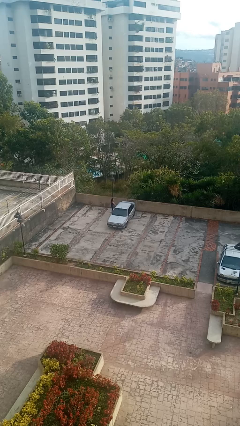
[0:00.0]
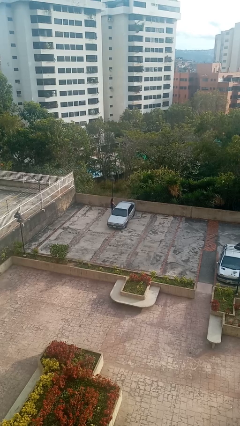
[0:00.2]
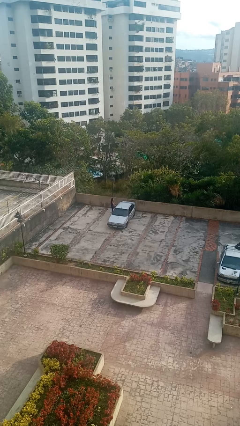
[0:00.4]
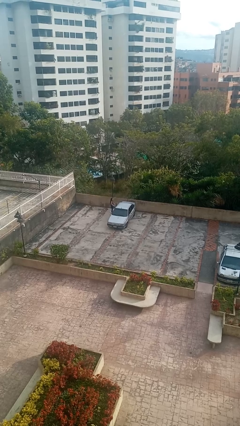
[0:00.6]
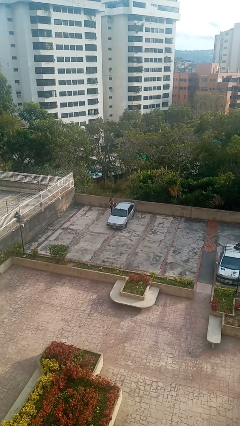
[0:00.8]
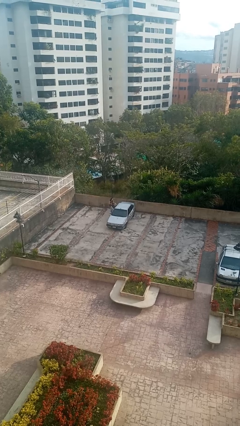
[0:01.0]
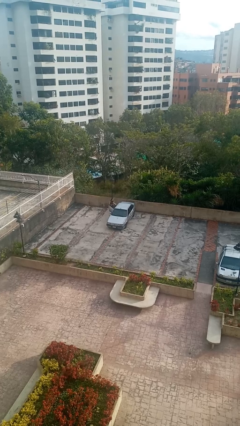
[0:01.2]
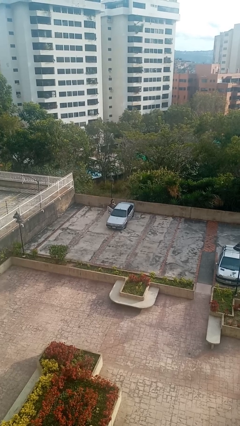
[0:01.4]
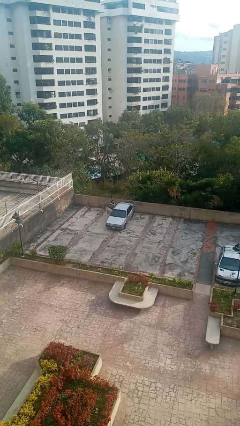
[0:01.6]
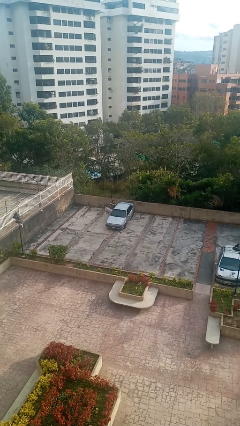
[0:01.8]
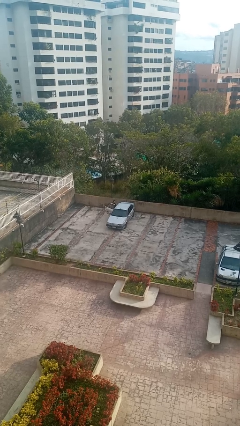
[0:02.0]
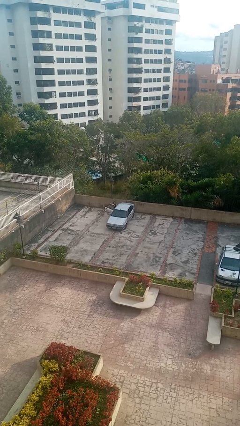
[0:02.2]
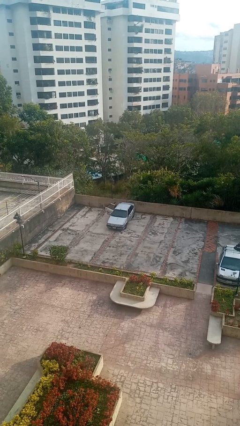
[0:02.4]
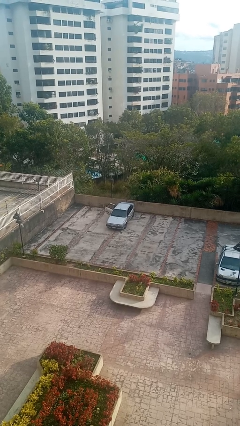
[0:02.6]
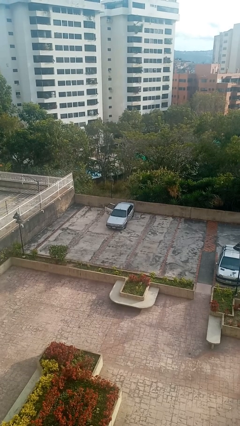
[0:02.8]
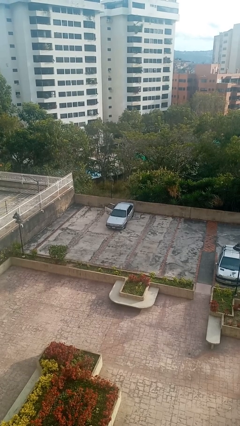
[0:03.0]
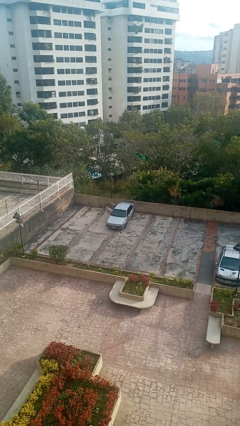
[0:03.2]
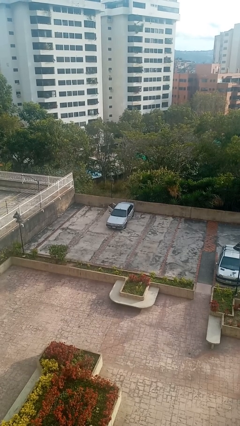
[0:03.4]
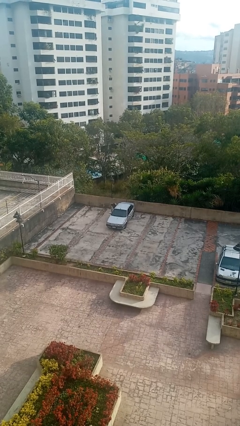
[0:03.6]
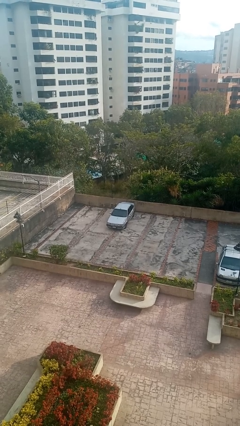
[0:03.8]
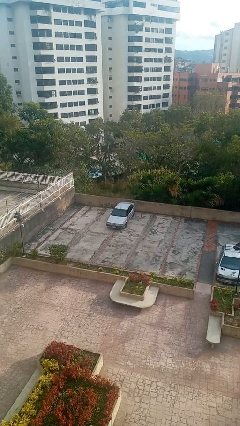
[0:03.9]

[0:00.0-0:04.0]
car picks up person

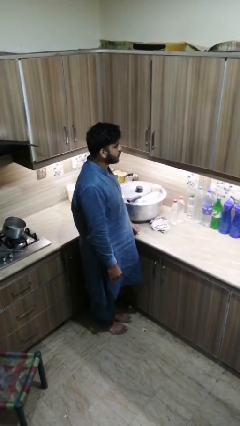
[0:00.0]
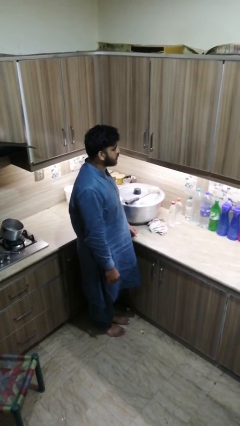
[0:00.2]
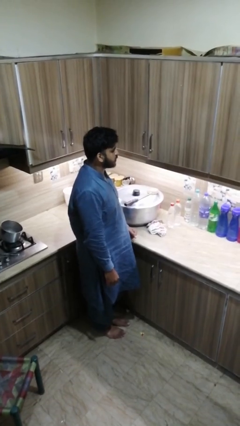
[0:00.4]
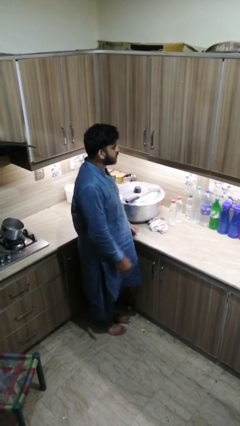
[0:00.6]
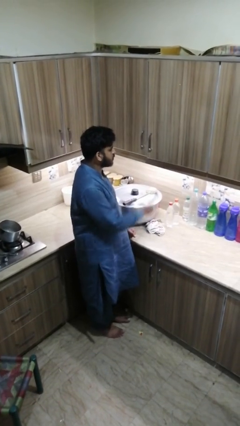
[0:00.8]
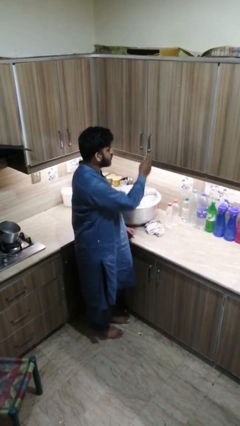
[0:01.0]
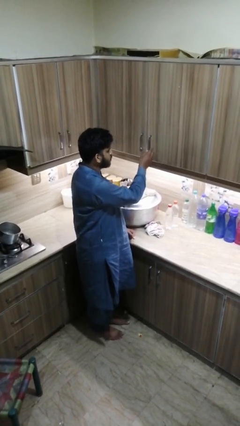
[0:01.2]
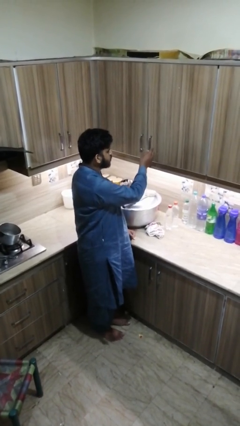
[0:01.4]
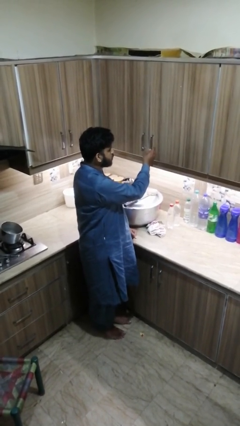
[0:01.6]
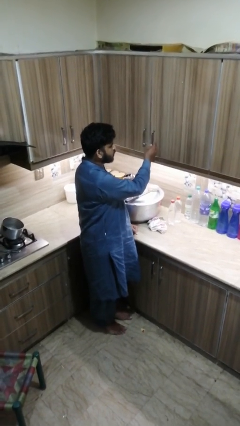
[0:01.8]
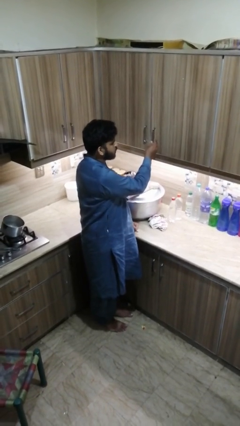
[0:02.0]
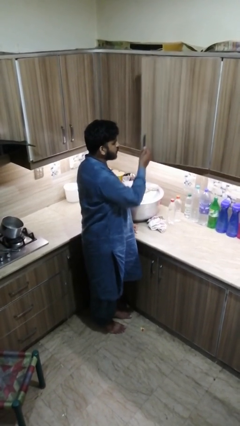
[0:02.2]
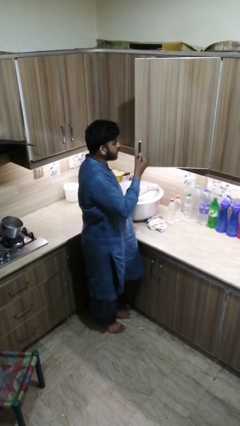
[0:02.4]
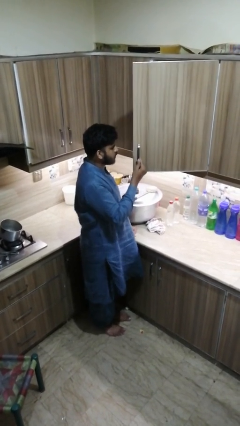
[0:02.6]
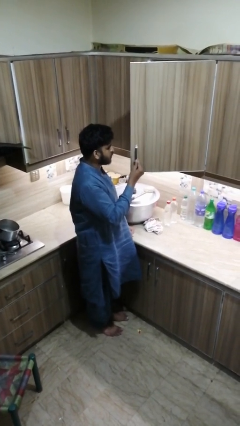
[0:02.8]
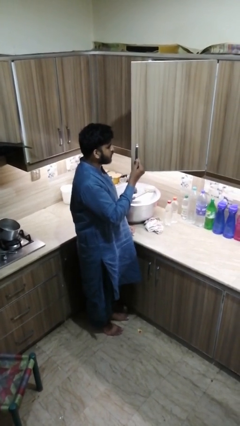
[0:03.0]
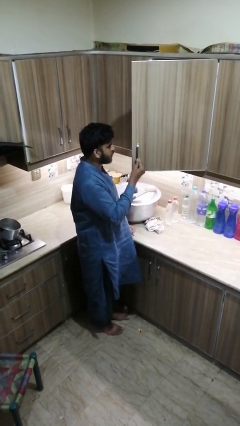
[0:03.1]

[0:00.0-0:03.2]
person opens kitchen drawer

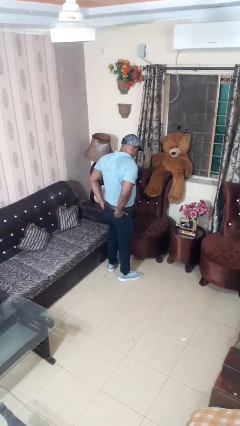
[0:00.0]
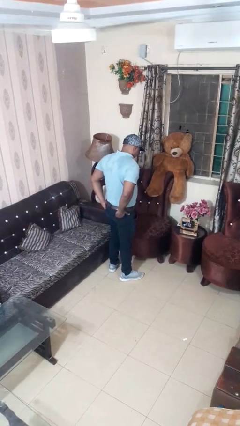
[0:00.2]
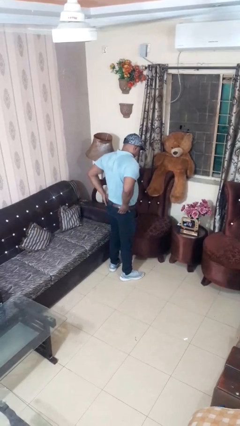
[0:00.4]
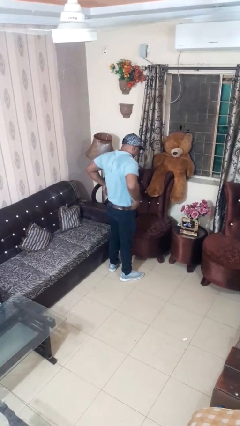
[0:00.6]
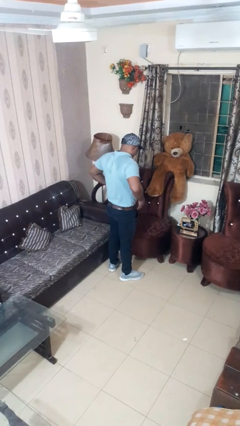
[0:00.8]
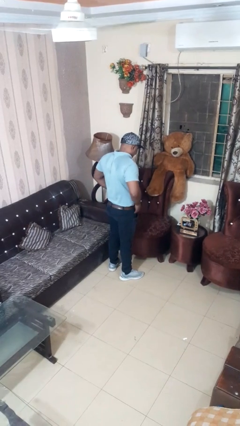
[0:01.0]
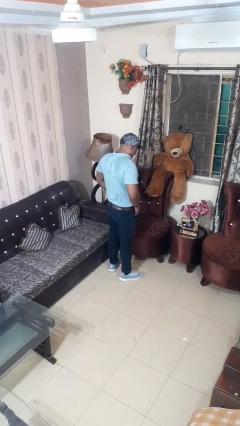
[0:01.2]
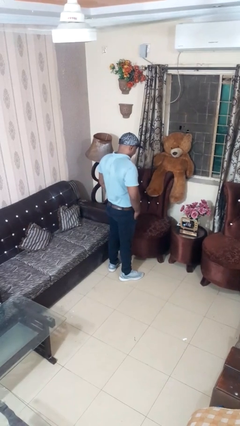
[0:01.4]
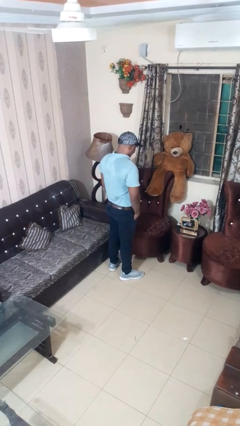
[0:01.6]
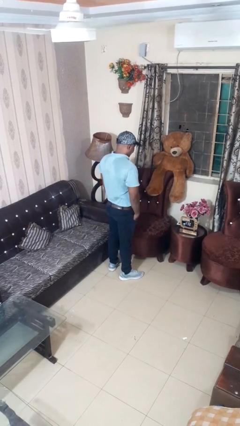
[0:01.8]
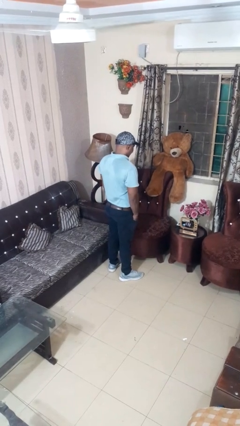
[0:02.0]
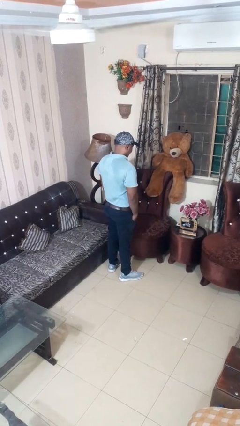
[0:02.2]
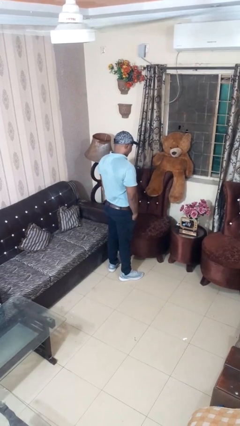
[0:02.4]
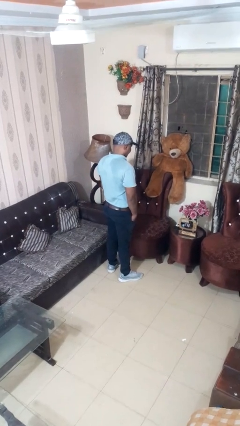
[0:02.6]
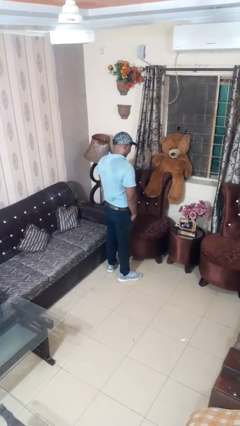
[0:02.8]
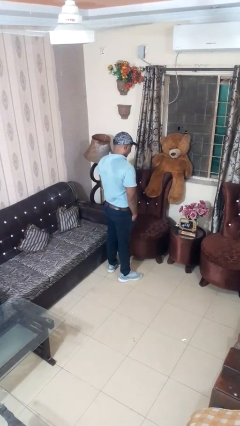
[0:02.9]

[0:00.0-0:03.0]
person puts hands in back pockets

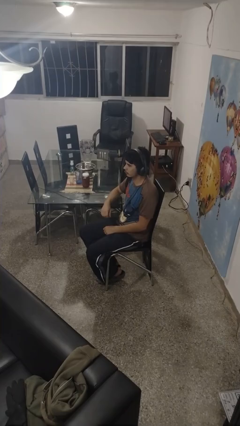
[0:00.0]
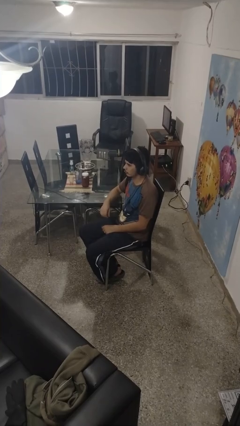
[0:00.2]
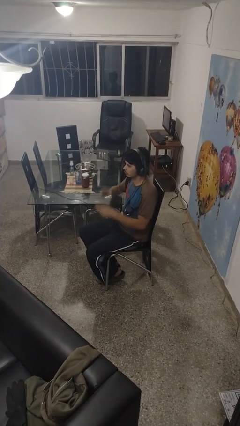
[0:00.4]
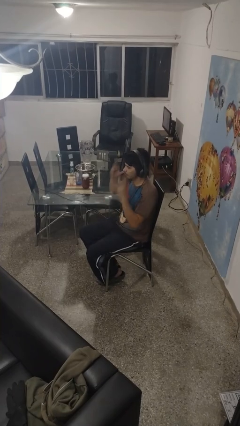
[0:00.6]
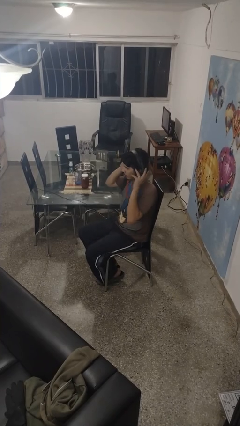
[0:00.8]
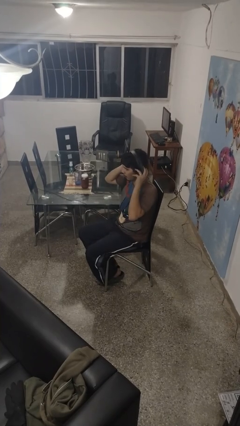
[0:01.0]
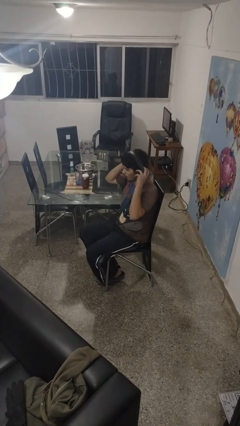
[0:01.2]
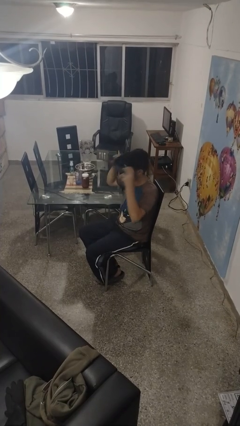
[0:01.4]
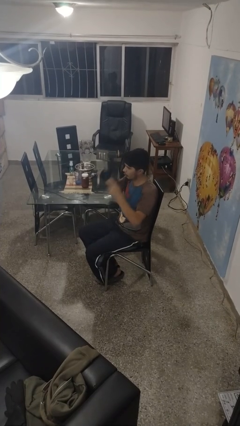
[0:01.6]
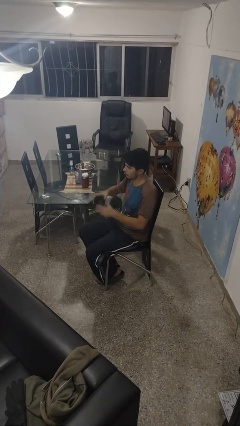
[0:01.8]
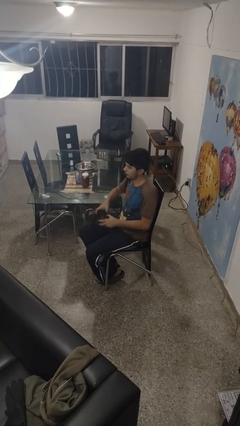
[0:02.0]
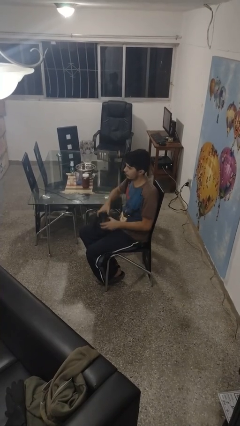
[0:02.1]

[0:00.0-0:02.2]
person takes off headphones

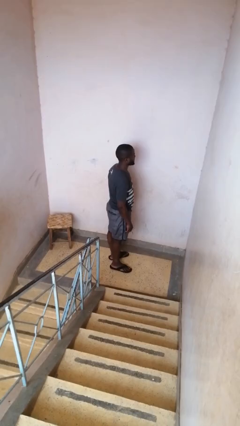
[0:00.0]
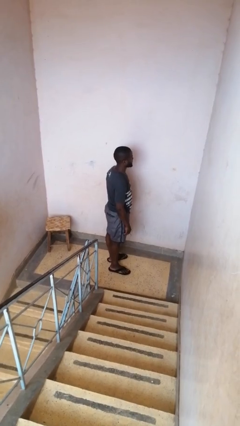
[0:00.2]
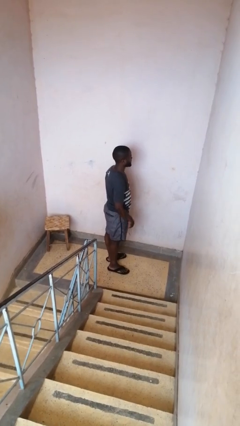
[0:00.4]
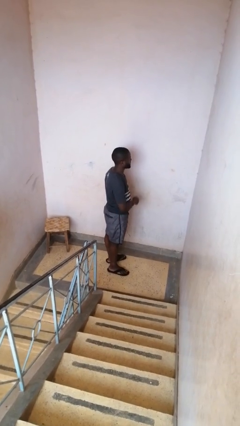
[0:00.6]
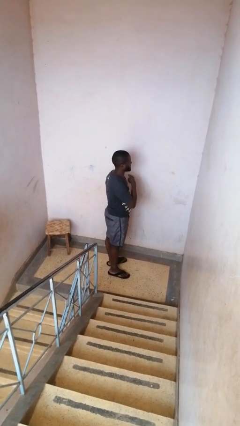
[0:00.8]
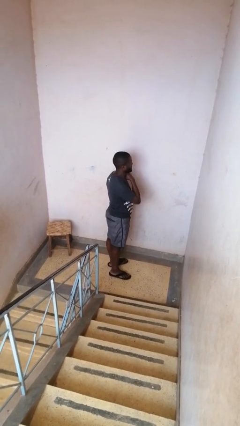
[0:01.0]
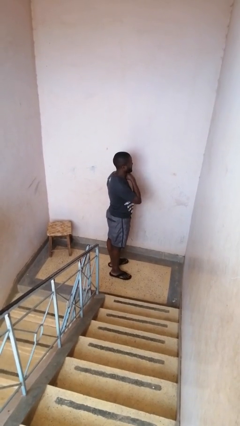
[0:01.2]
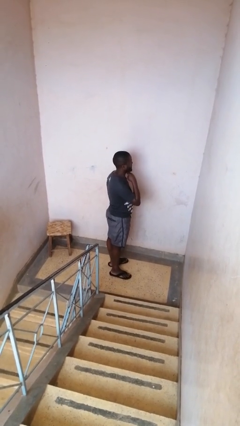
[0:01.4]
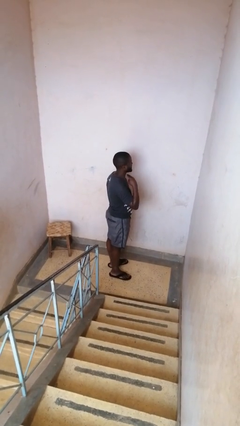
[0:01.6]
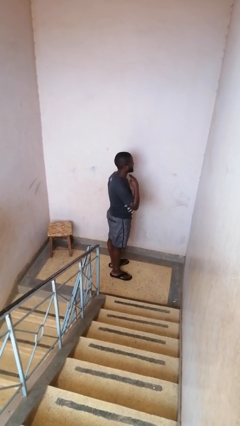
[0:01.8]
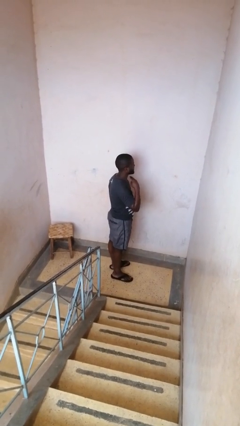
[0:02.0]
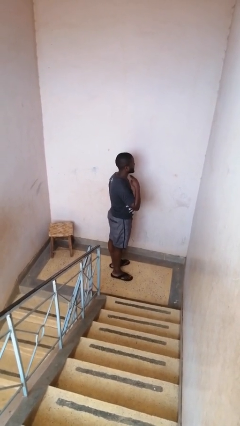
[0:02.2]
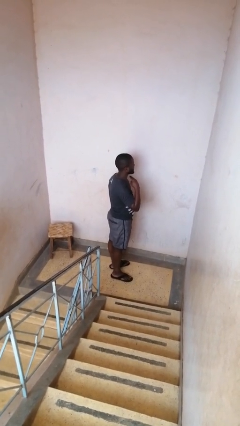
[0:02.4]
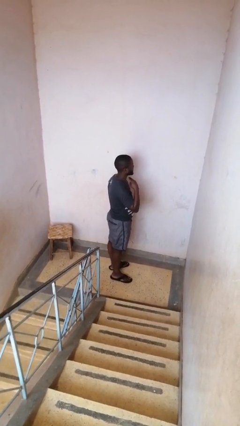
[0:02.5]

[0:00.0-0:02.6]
person gestures cut

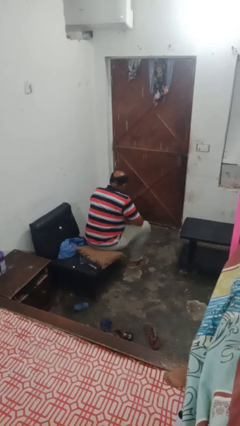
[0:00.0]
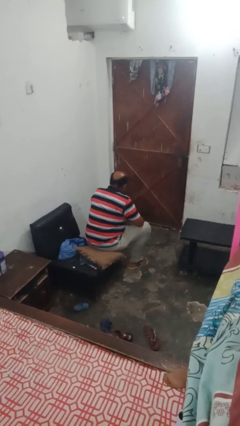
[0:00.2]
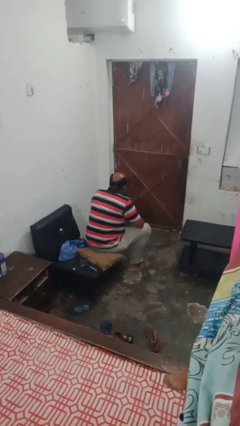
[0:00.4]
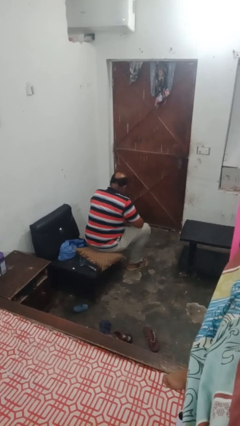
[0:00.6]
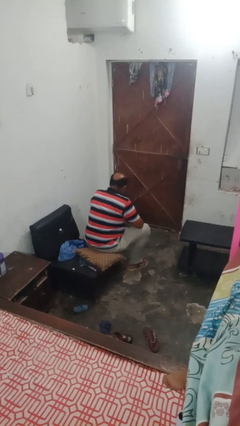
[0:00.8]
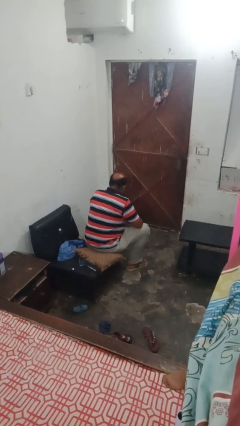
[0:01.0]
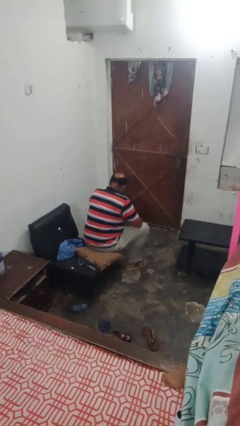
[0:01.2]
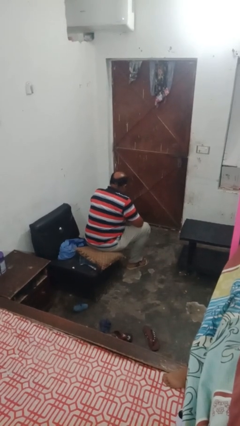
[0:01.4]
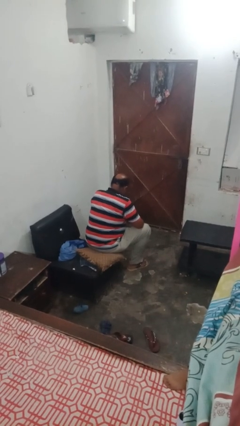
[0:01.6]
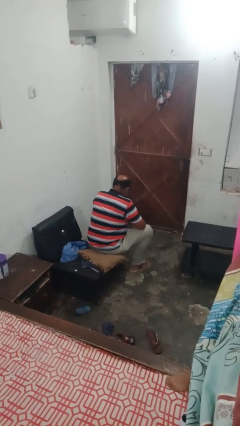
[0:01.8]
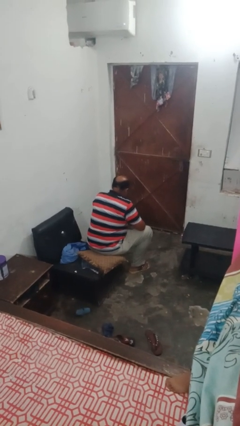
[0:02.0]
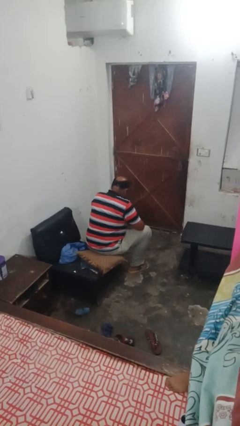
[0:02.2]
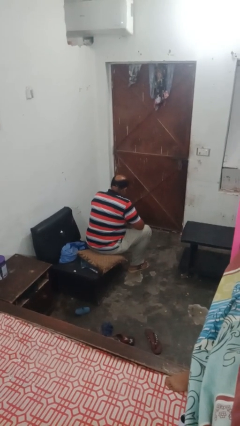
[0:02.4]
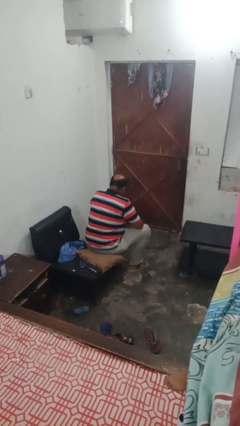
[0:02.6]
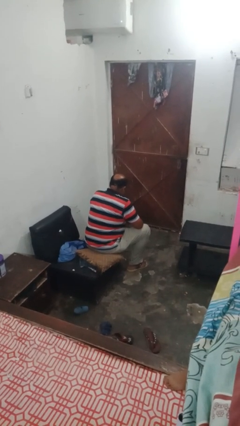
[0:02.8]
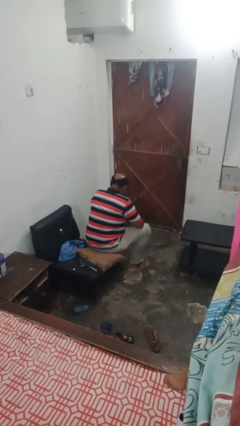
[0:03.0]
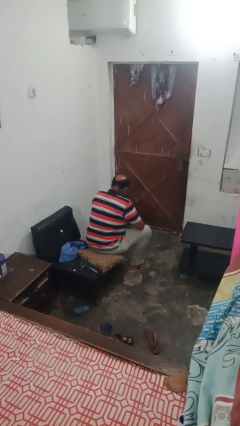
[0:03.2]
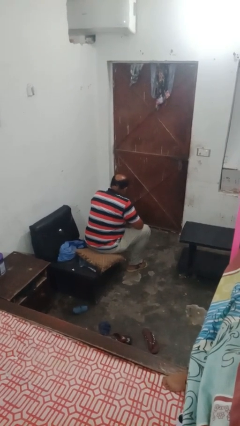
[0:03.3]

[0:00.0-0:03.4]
person nods head
